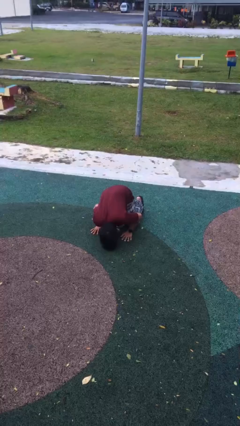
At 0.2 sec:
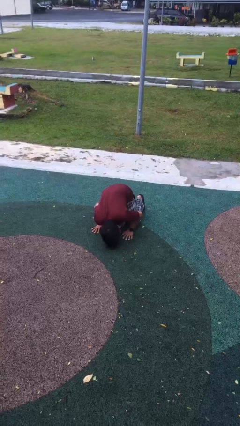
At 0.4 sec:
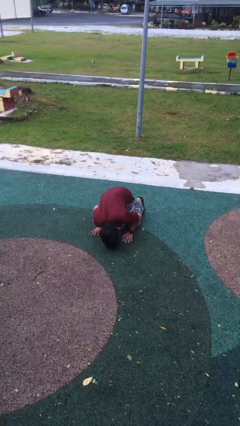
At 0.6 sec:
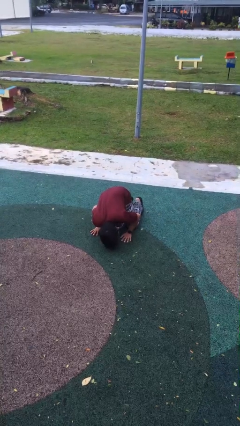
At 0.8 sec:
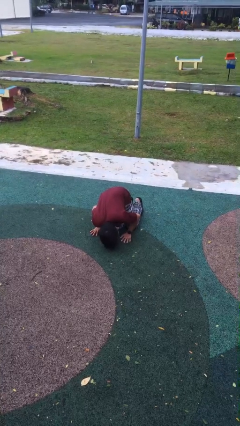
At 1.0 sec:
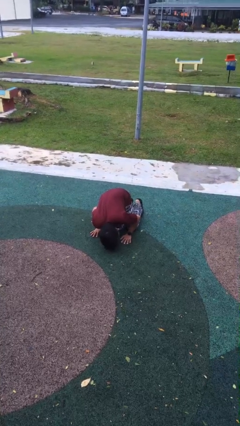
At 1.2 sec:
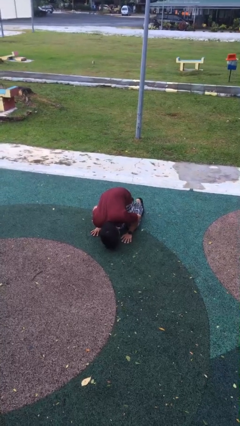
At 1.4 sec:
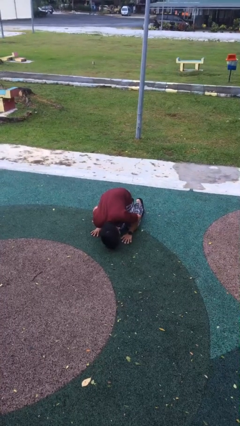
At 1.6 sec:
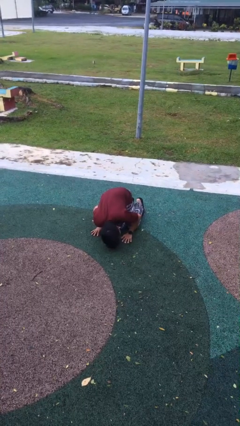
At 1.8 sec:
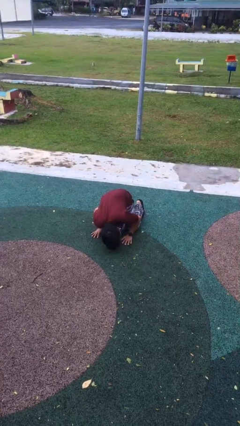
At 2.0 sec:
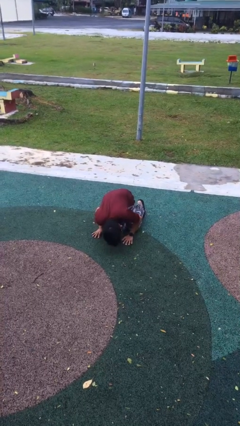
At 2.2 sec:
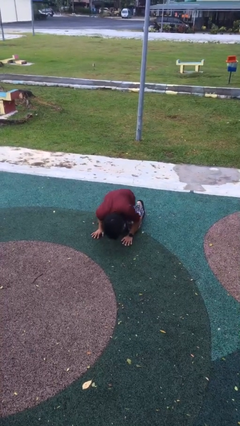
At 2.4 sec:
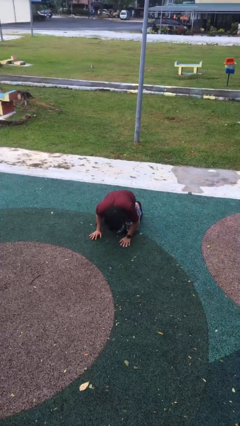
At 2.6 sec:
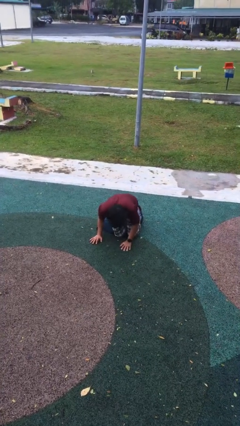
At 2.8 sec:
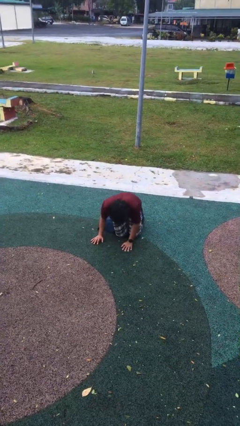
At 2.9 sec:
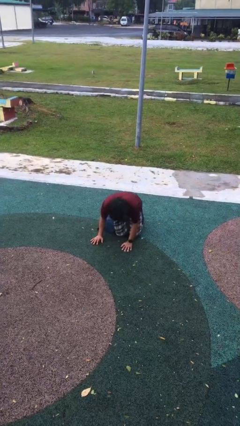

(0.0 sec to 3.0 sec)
person lies down on floor

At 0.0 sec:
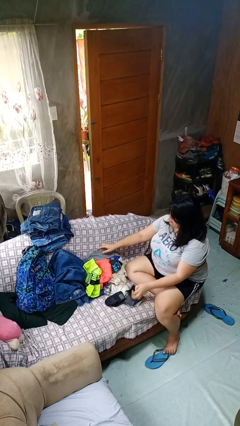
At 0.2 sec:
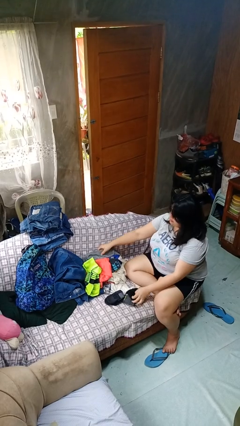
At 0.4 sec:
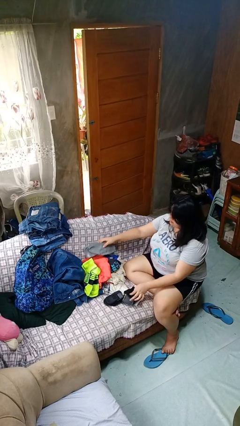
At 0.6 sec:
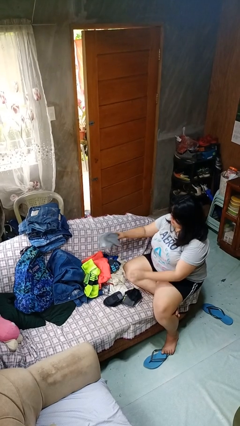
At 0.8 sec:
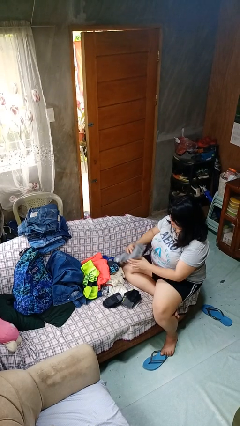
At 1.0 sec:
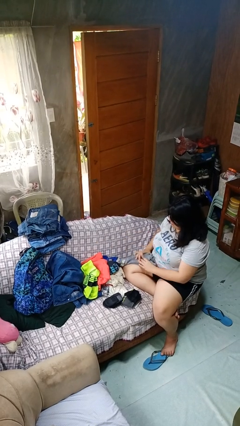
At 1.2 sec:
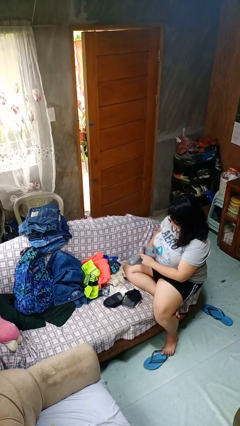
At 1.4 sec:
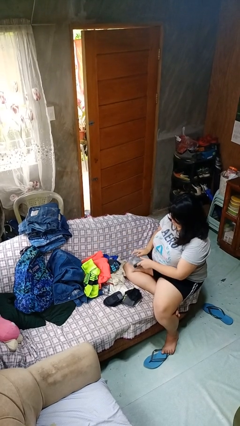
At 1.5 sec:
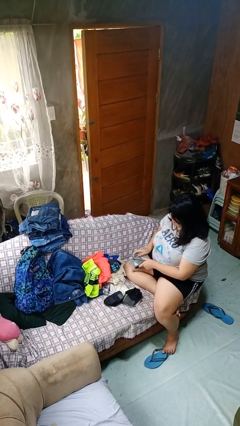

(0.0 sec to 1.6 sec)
person folds socks

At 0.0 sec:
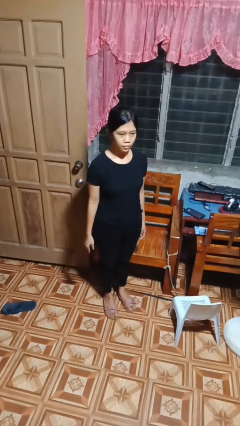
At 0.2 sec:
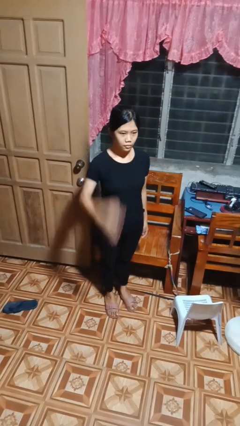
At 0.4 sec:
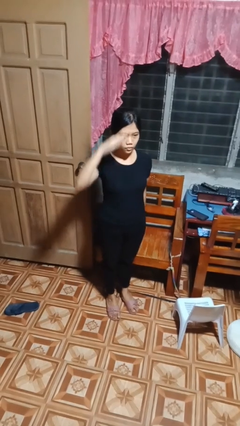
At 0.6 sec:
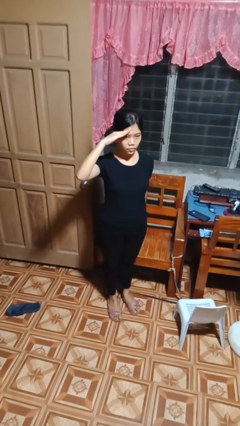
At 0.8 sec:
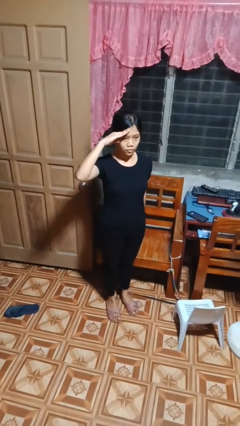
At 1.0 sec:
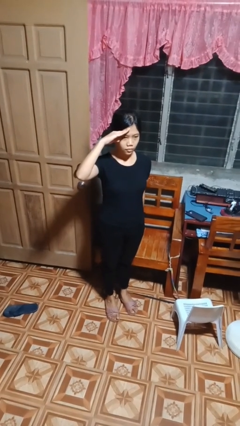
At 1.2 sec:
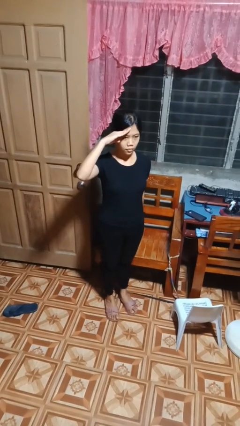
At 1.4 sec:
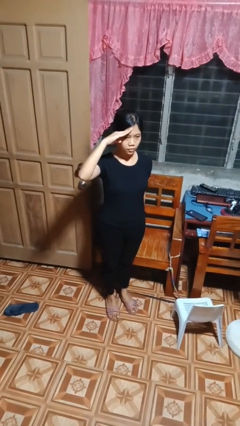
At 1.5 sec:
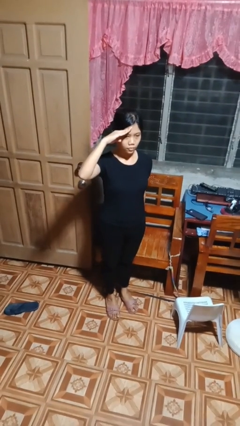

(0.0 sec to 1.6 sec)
person salutes

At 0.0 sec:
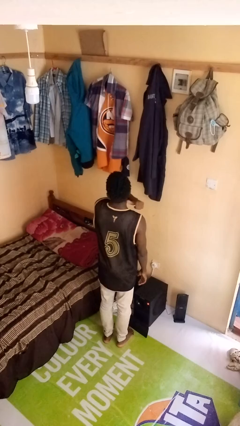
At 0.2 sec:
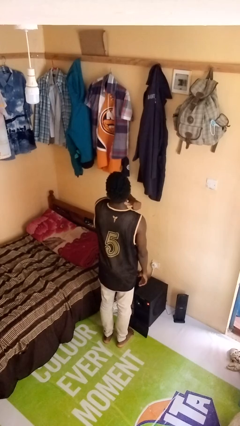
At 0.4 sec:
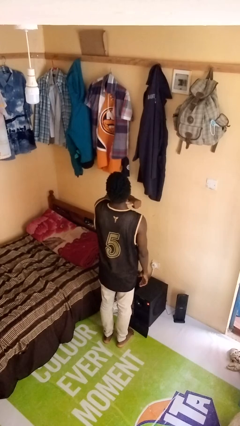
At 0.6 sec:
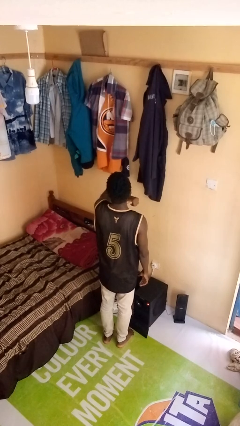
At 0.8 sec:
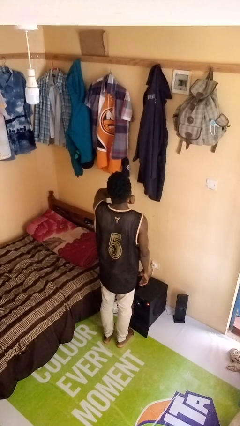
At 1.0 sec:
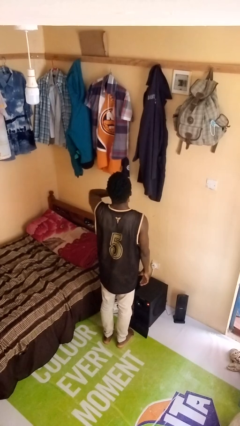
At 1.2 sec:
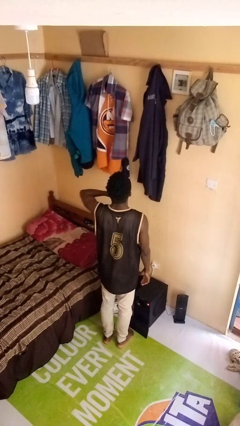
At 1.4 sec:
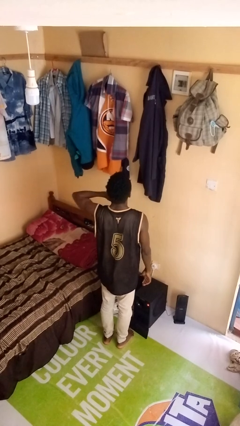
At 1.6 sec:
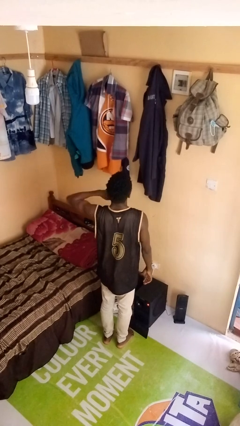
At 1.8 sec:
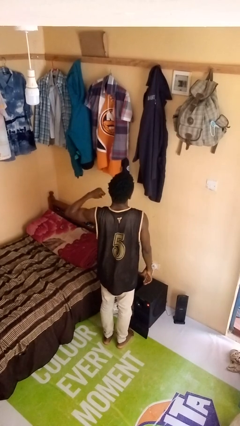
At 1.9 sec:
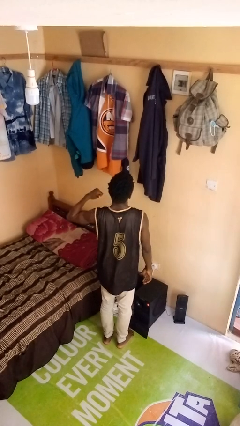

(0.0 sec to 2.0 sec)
person gestures cut

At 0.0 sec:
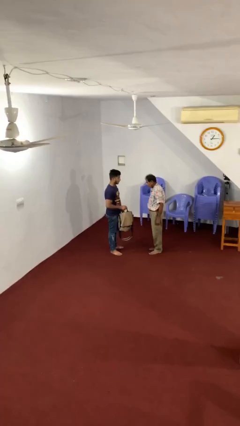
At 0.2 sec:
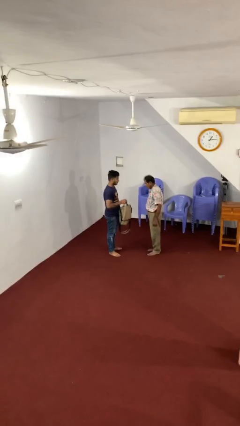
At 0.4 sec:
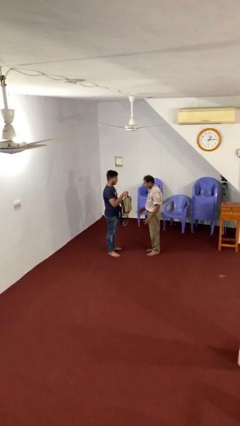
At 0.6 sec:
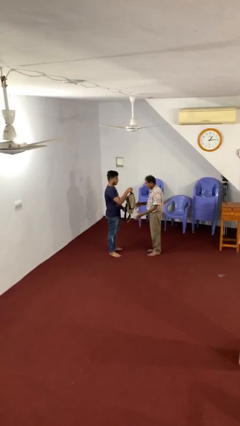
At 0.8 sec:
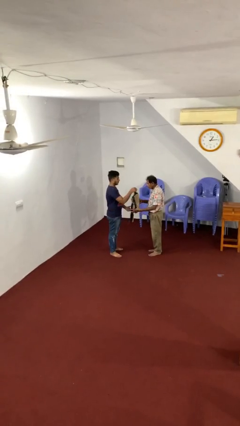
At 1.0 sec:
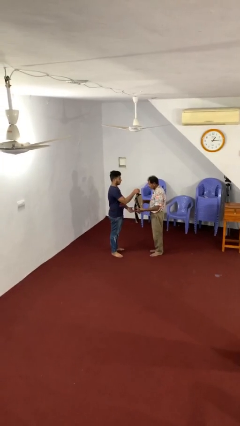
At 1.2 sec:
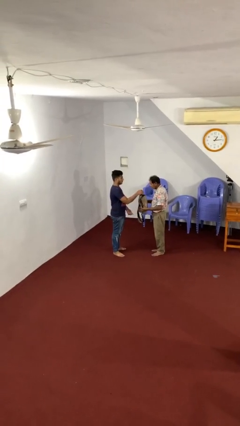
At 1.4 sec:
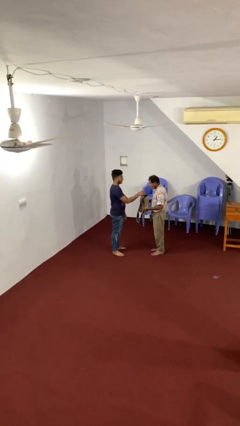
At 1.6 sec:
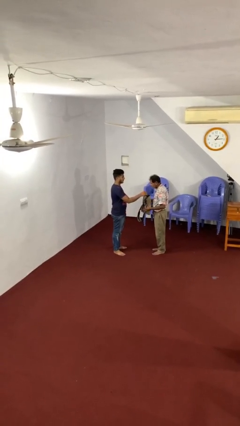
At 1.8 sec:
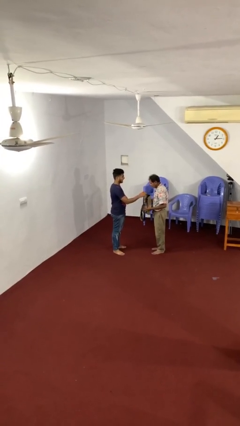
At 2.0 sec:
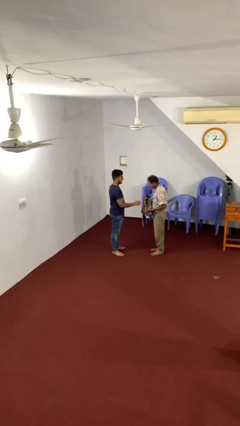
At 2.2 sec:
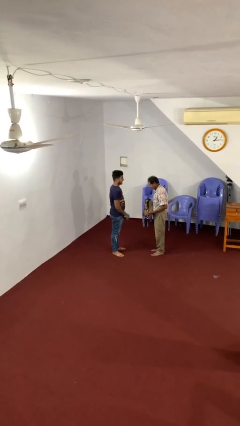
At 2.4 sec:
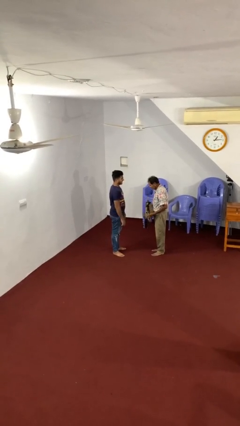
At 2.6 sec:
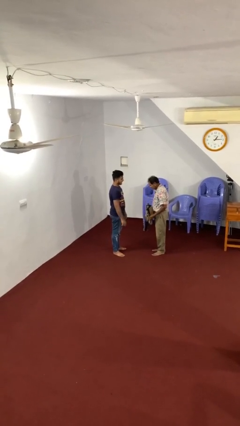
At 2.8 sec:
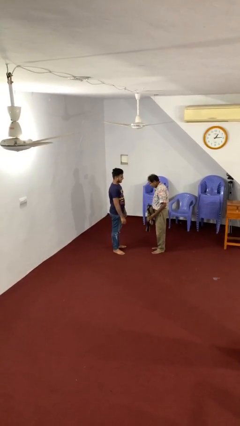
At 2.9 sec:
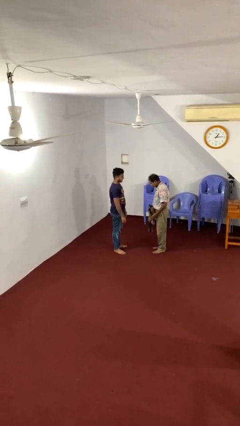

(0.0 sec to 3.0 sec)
person transfers object to person

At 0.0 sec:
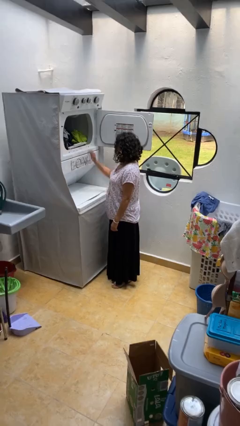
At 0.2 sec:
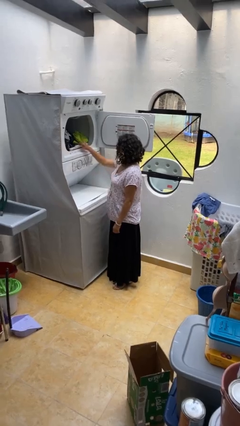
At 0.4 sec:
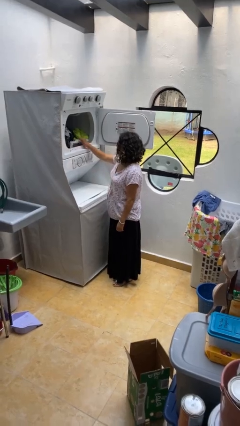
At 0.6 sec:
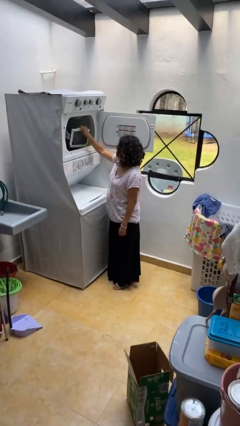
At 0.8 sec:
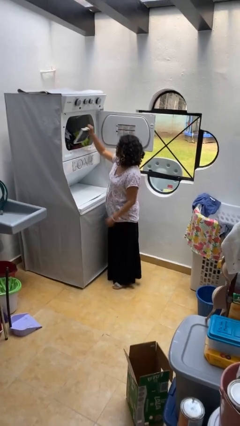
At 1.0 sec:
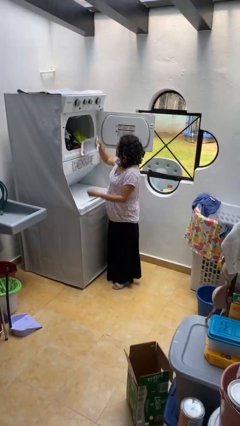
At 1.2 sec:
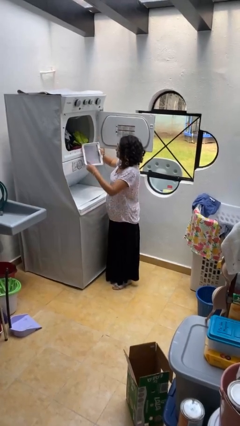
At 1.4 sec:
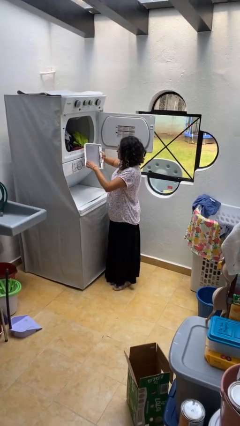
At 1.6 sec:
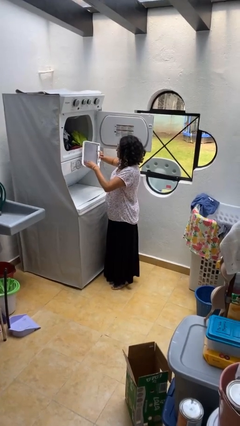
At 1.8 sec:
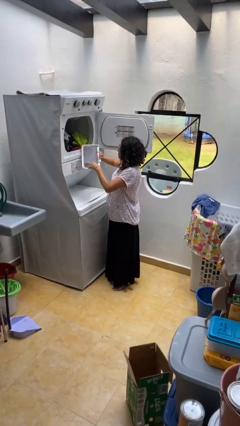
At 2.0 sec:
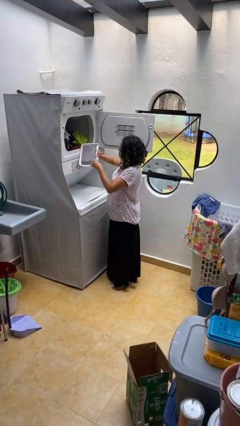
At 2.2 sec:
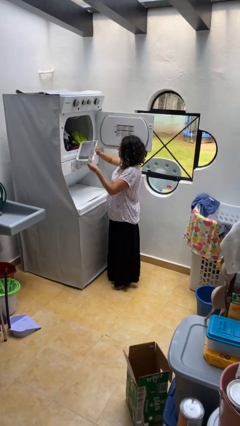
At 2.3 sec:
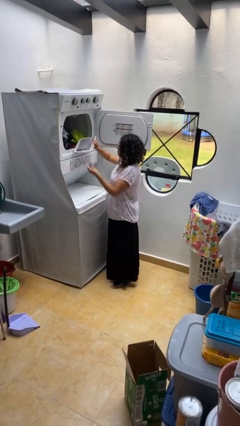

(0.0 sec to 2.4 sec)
person cleans dryer lint trap

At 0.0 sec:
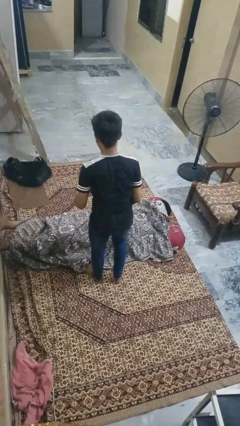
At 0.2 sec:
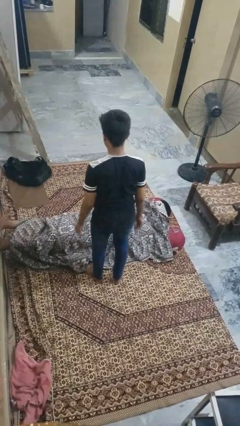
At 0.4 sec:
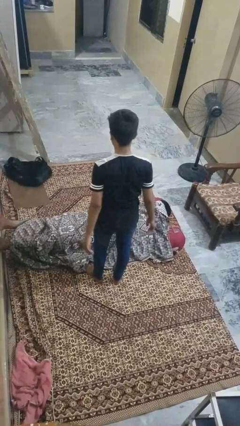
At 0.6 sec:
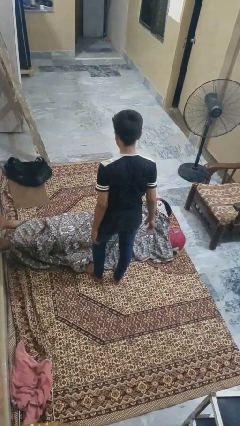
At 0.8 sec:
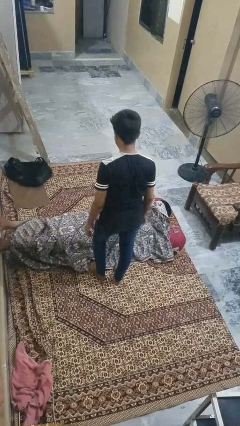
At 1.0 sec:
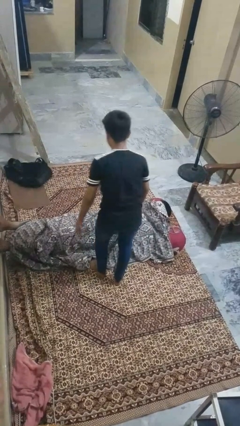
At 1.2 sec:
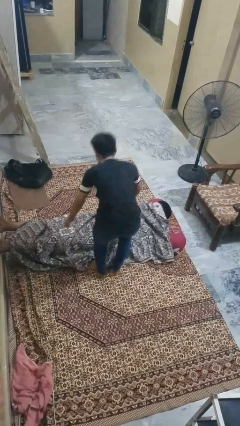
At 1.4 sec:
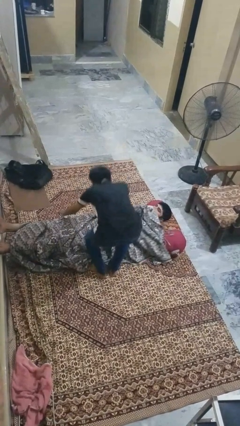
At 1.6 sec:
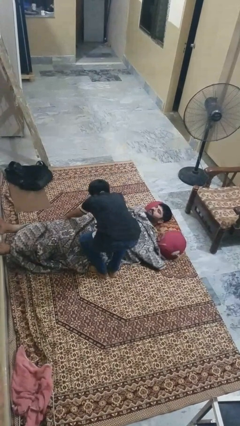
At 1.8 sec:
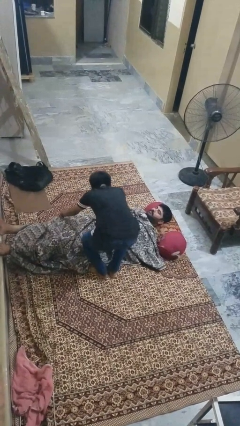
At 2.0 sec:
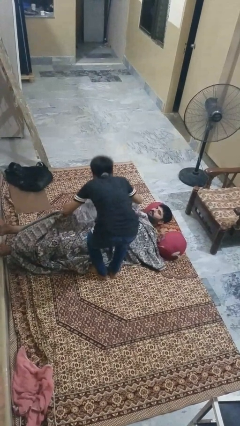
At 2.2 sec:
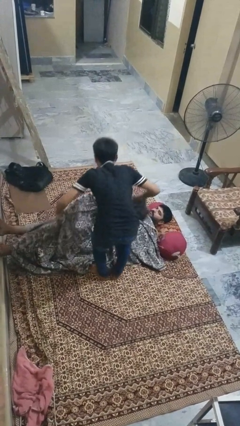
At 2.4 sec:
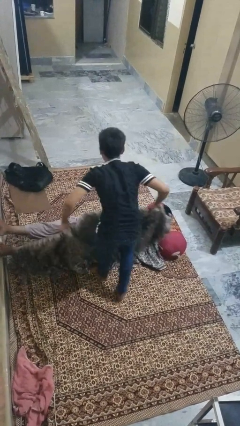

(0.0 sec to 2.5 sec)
person uncovers friend with blanket

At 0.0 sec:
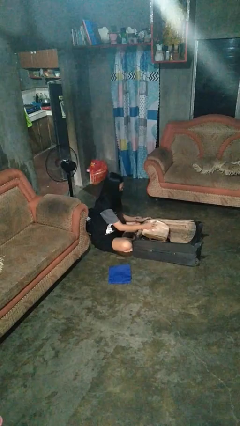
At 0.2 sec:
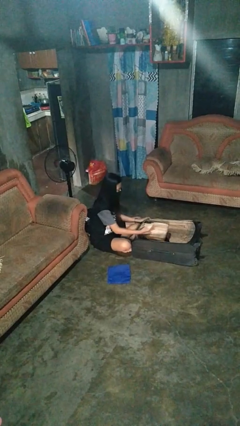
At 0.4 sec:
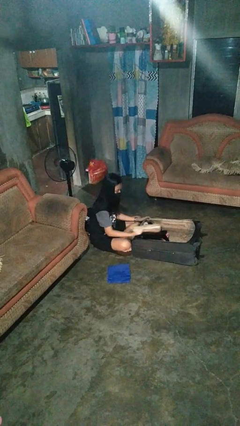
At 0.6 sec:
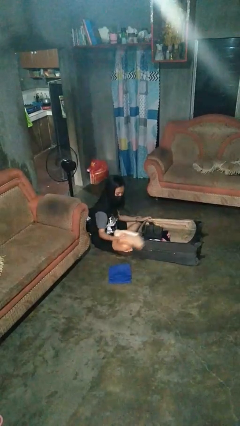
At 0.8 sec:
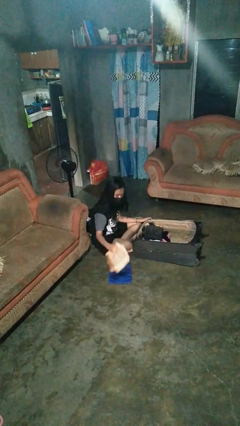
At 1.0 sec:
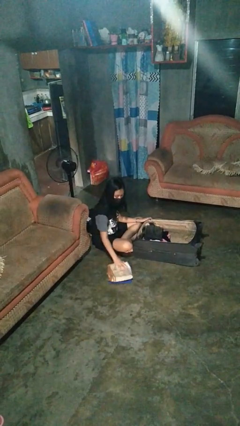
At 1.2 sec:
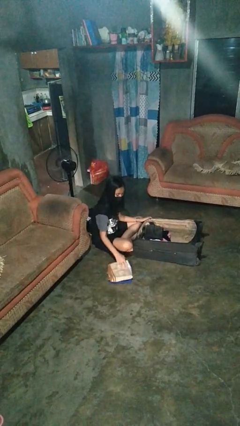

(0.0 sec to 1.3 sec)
person unloads clothes from suitcase
